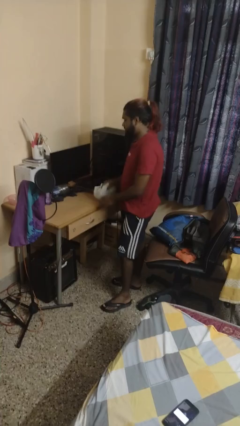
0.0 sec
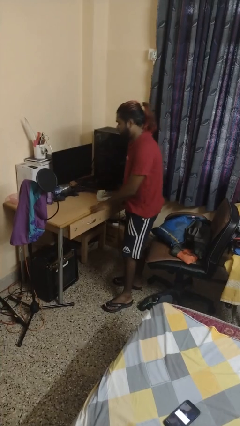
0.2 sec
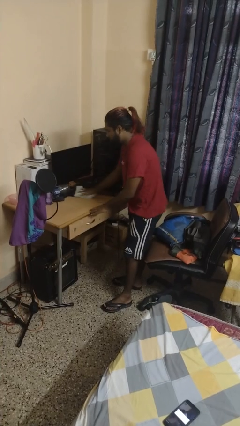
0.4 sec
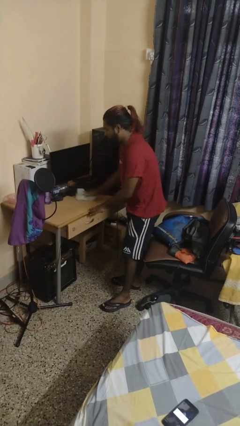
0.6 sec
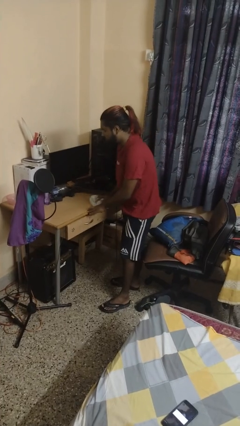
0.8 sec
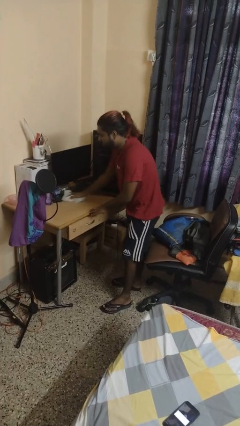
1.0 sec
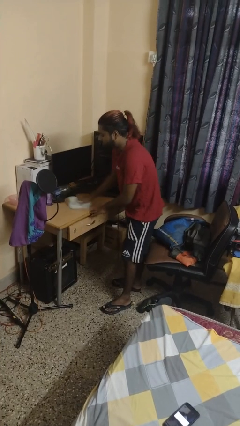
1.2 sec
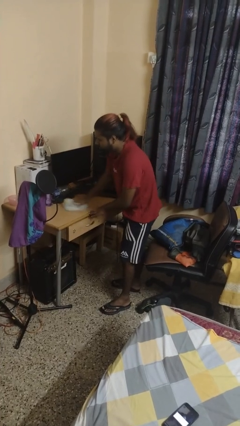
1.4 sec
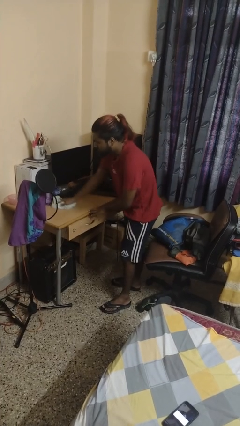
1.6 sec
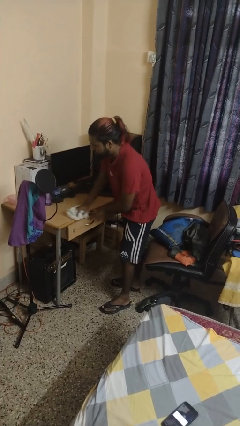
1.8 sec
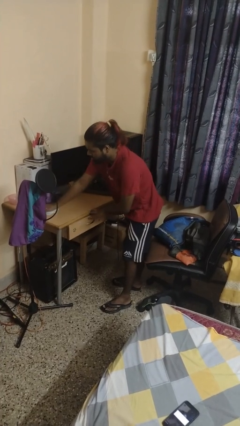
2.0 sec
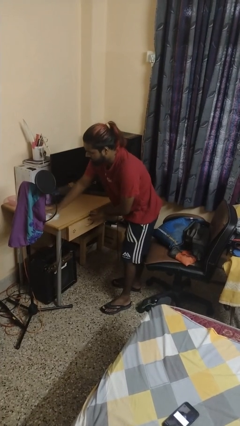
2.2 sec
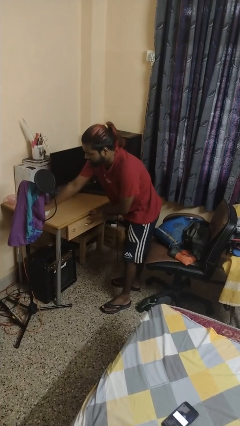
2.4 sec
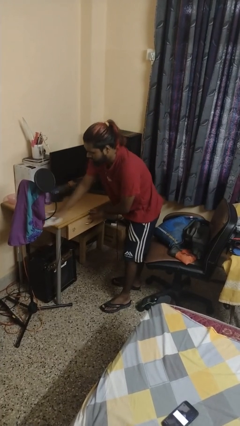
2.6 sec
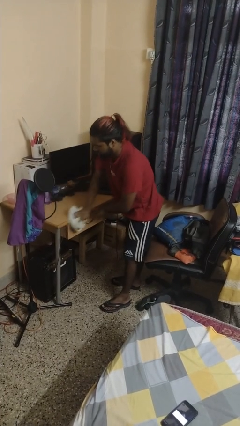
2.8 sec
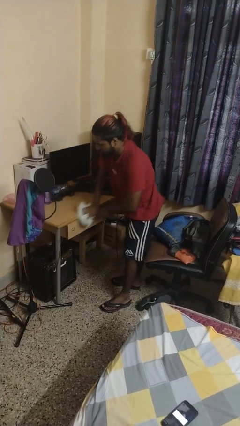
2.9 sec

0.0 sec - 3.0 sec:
person cleans table with rag

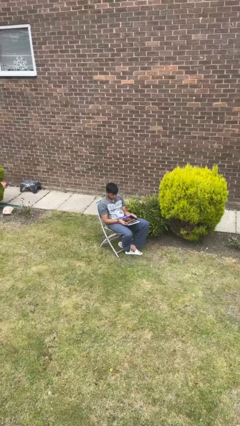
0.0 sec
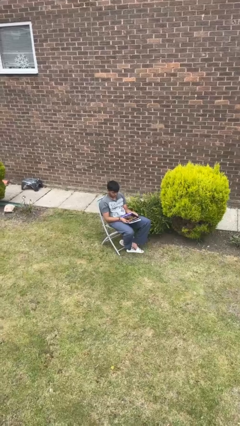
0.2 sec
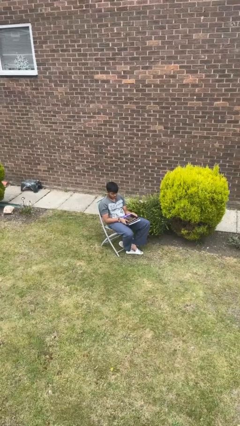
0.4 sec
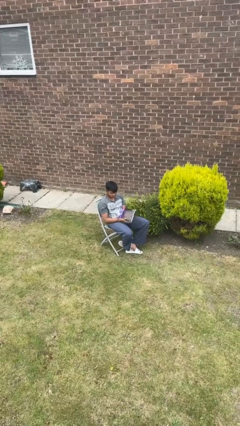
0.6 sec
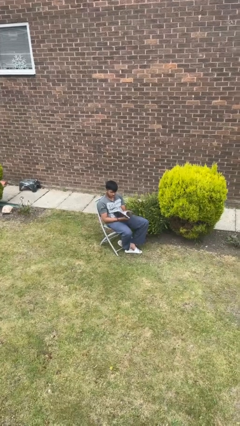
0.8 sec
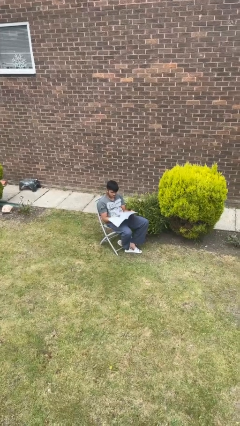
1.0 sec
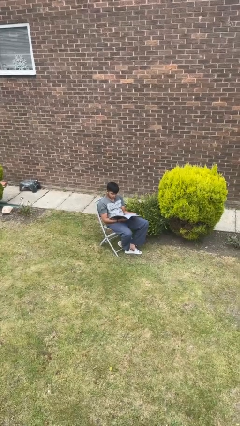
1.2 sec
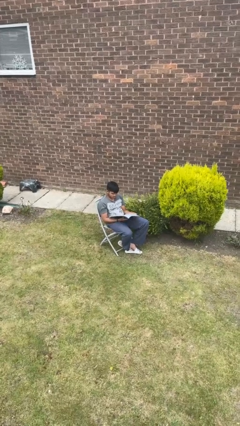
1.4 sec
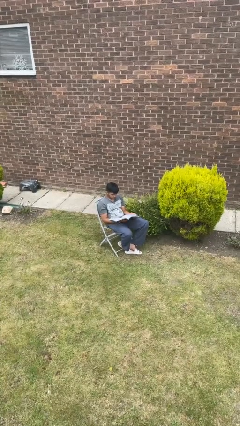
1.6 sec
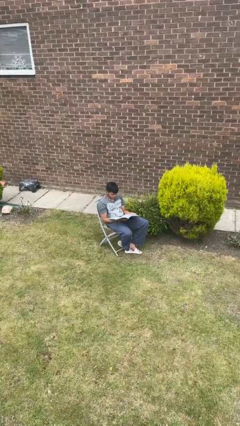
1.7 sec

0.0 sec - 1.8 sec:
person reads magazine

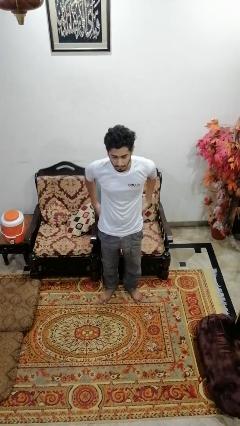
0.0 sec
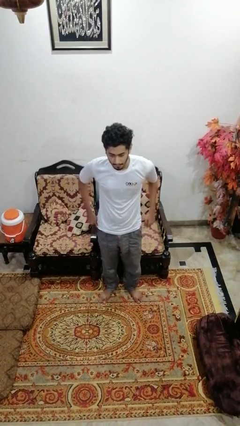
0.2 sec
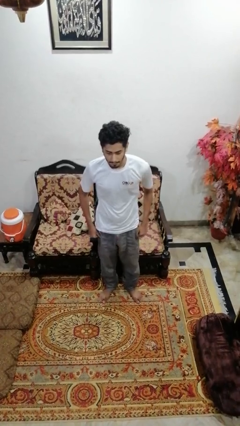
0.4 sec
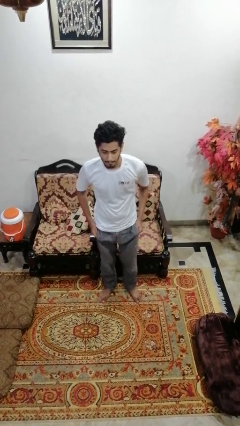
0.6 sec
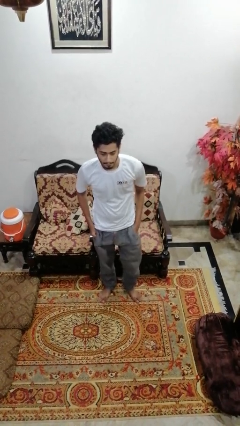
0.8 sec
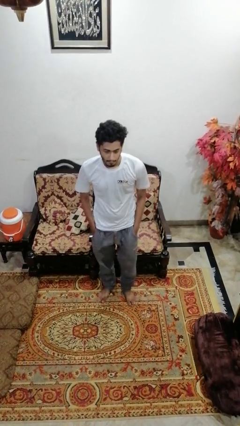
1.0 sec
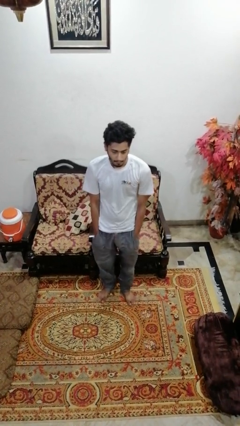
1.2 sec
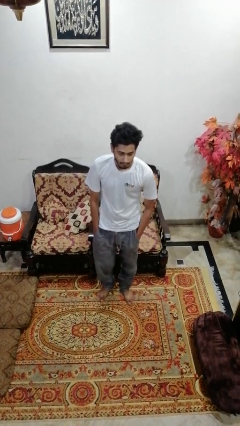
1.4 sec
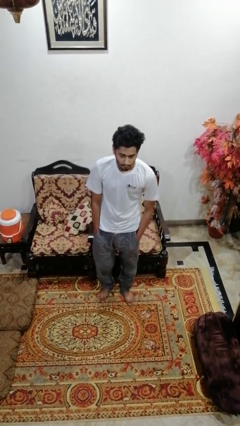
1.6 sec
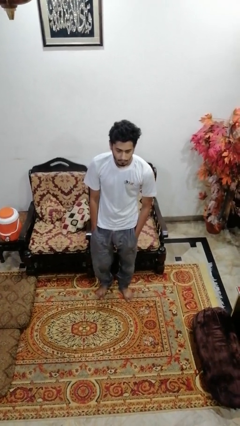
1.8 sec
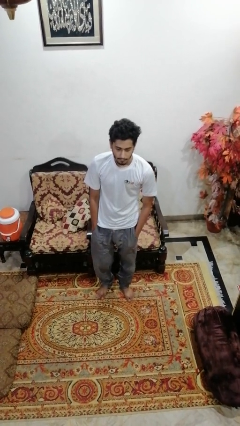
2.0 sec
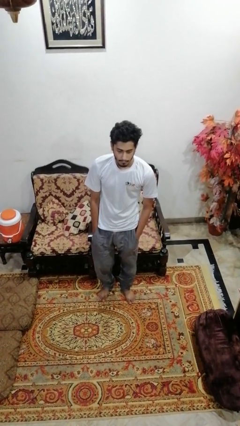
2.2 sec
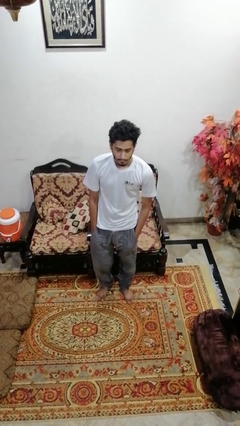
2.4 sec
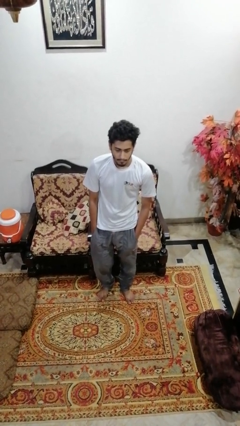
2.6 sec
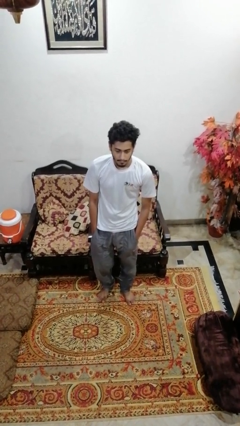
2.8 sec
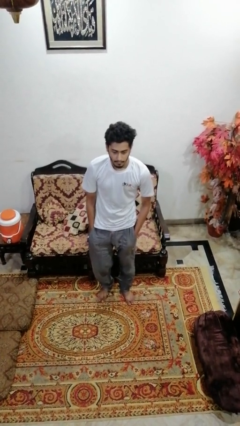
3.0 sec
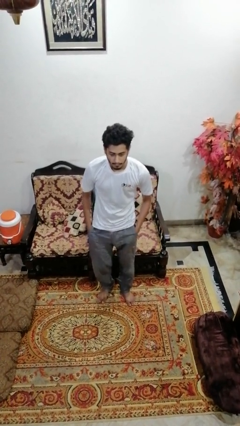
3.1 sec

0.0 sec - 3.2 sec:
person puts hands in back pockets

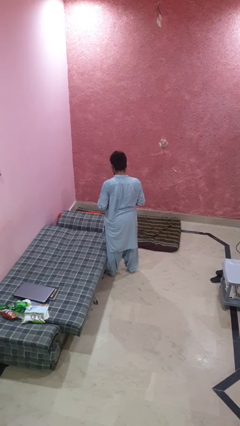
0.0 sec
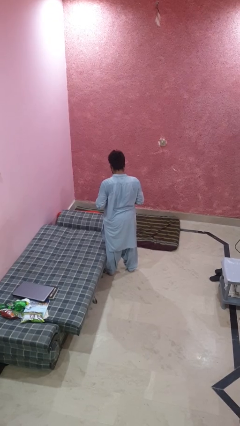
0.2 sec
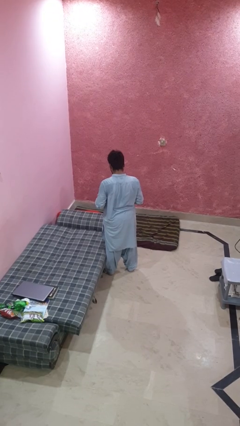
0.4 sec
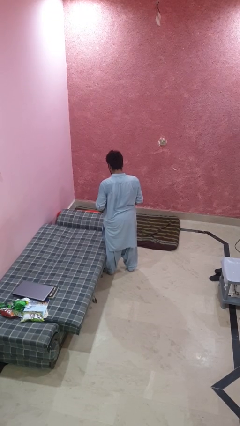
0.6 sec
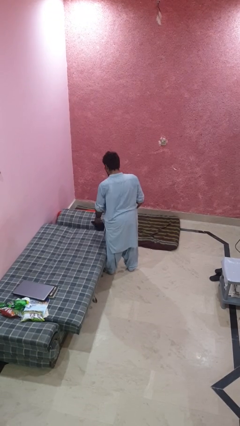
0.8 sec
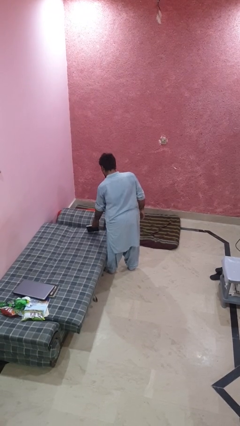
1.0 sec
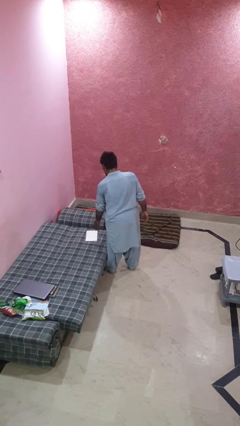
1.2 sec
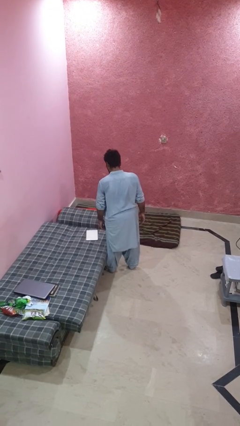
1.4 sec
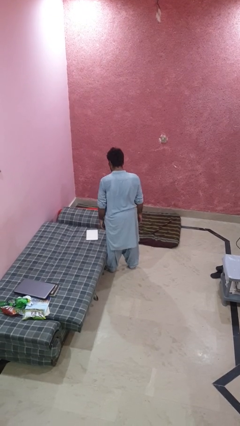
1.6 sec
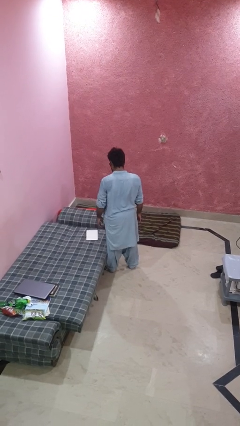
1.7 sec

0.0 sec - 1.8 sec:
person puts down object on bed

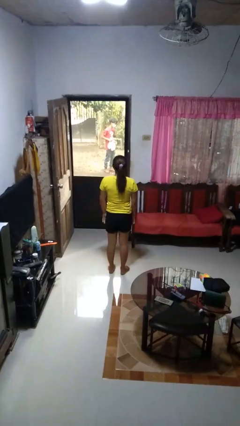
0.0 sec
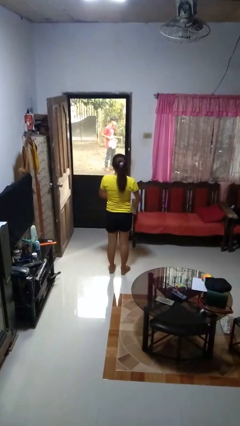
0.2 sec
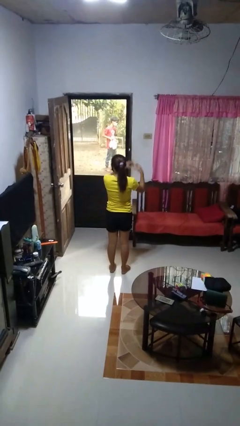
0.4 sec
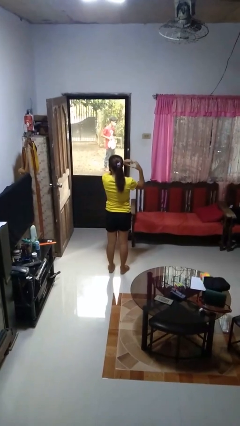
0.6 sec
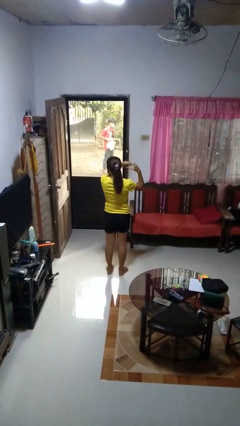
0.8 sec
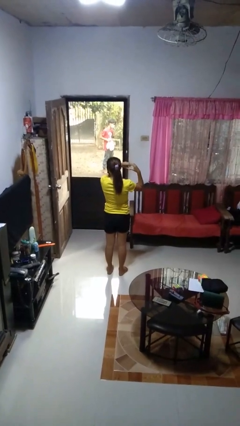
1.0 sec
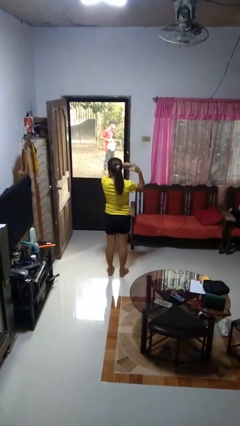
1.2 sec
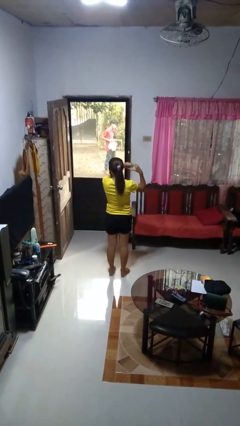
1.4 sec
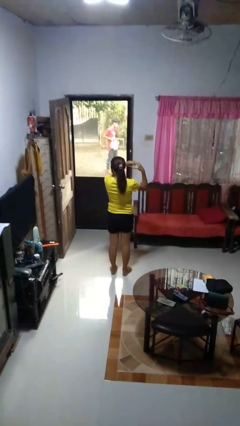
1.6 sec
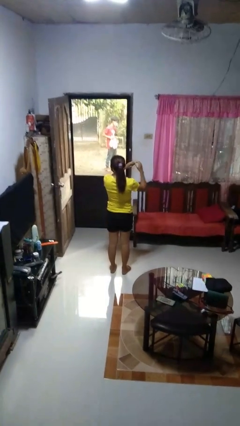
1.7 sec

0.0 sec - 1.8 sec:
person gestures heart

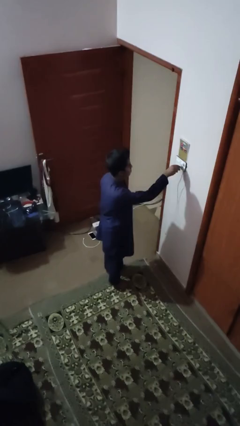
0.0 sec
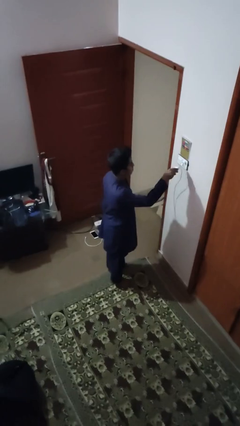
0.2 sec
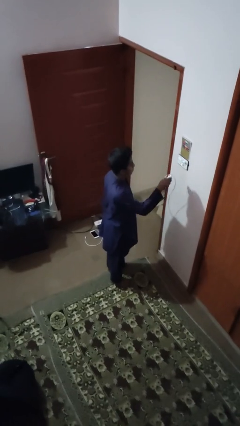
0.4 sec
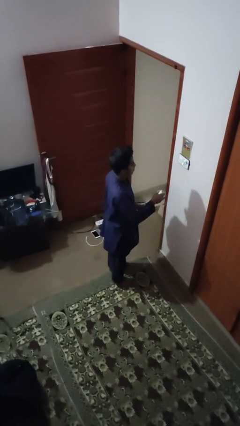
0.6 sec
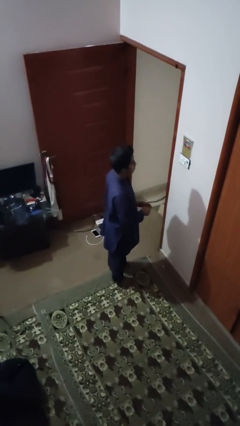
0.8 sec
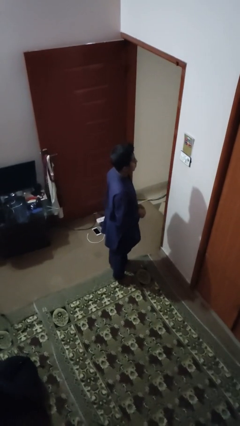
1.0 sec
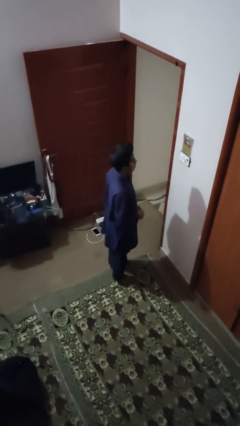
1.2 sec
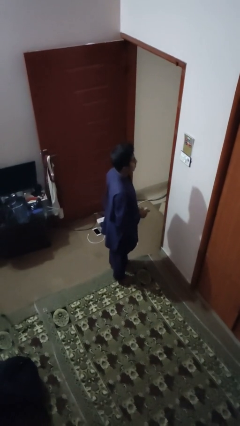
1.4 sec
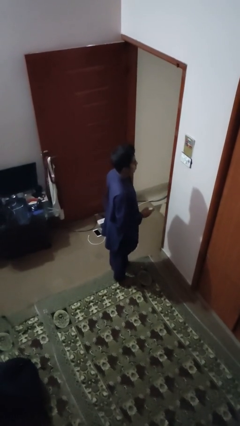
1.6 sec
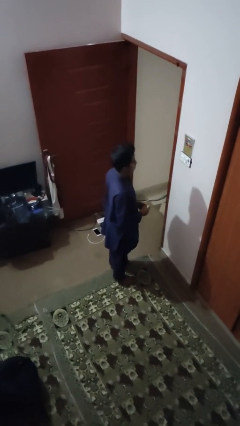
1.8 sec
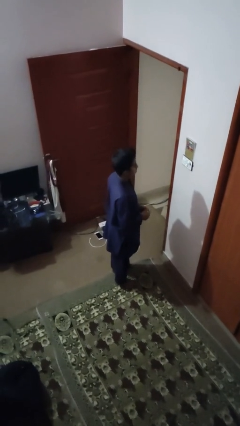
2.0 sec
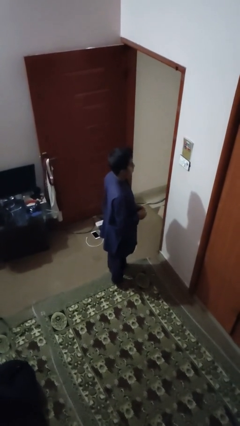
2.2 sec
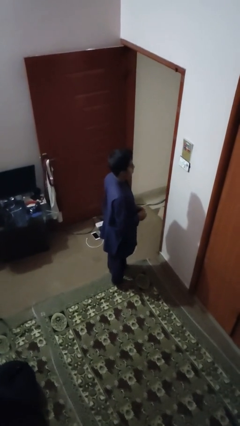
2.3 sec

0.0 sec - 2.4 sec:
person unplugs from electrical socket

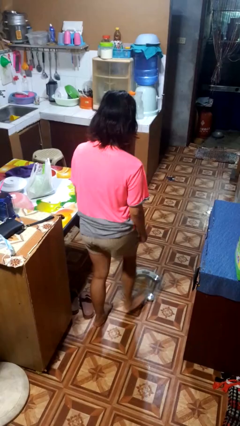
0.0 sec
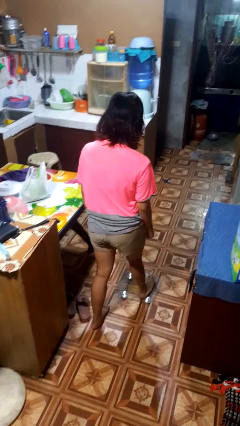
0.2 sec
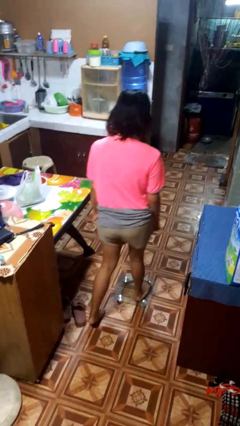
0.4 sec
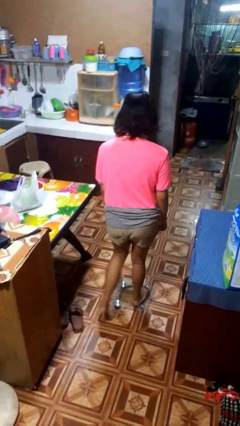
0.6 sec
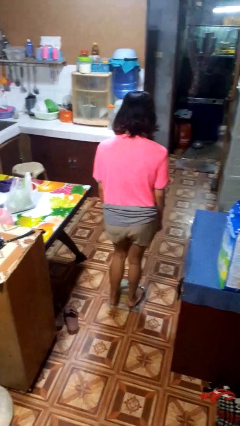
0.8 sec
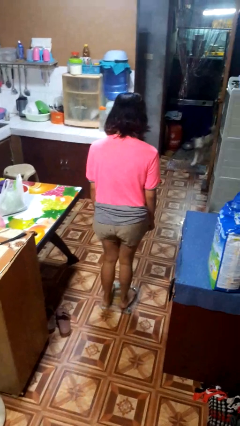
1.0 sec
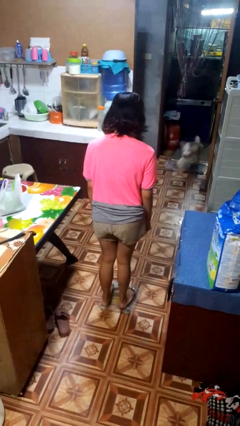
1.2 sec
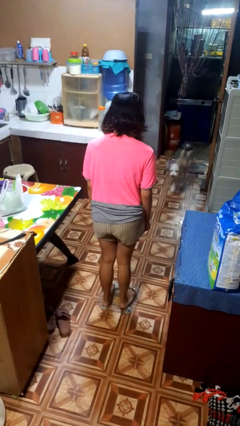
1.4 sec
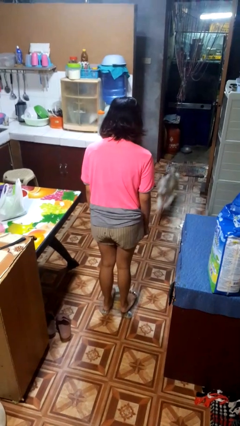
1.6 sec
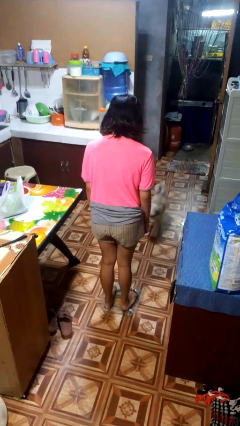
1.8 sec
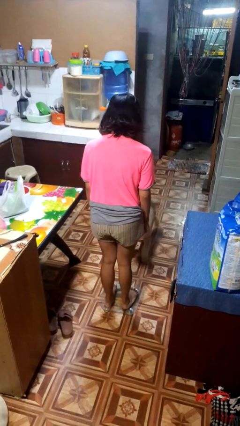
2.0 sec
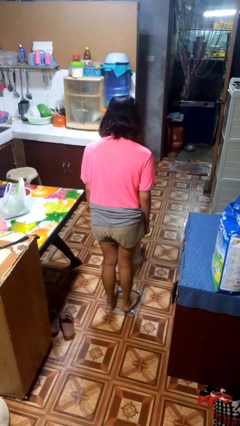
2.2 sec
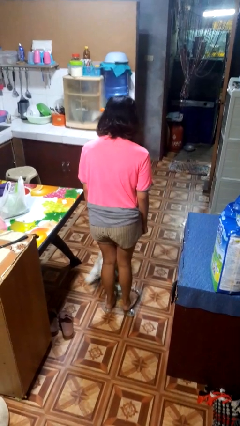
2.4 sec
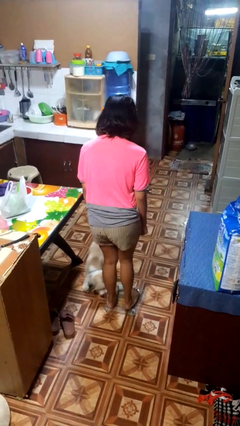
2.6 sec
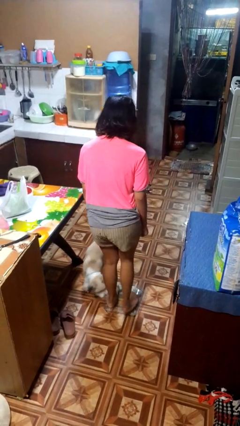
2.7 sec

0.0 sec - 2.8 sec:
person uses bodyweight scale

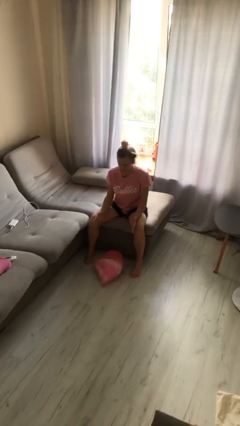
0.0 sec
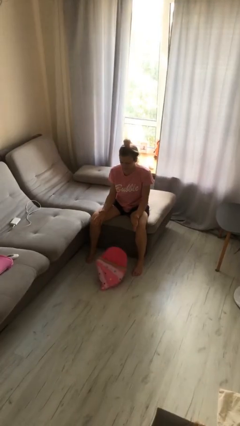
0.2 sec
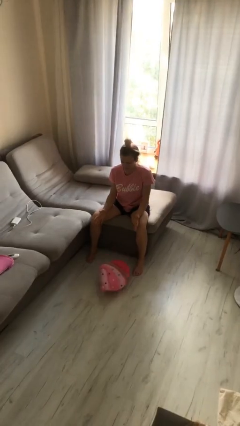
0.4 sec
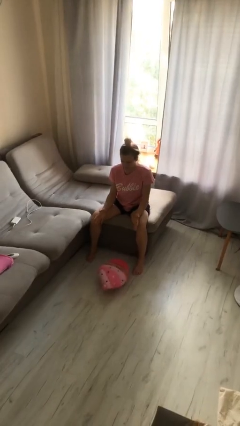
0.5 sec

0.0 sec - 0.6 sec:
person drops object
